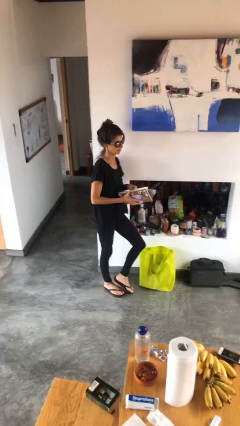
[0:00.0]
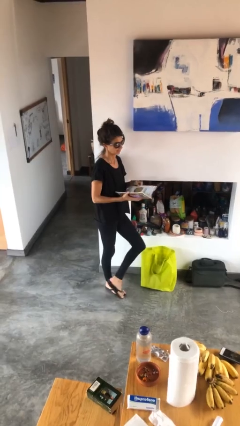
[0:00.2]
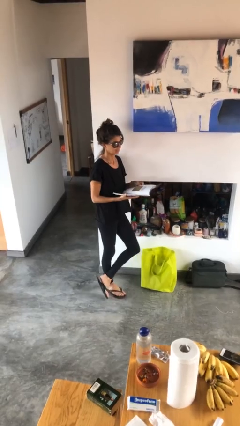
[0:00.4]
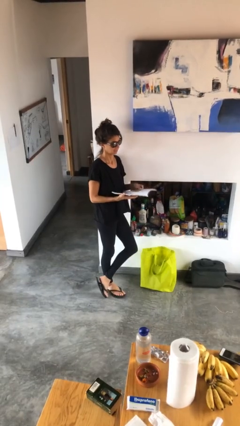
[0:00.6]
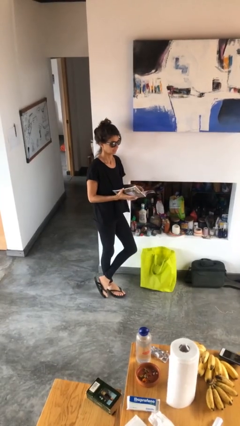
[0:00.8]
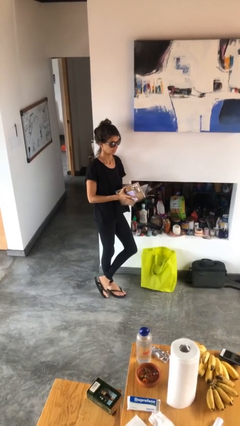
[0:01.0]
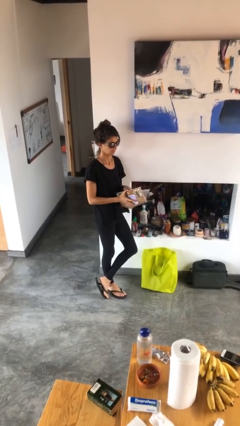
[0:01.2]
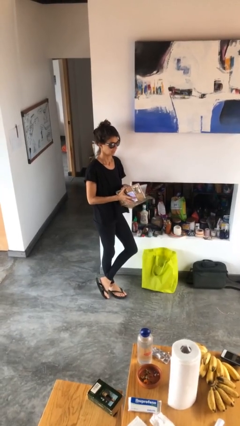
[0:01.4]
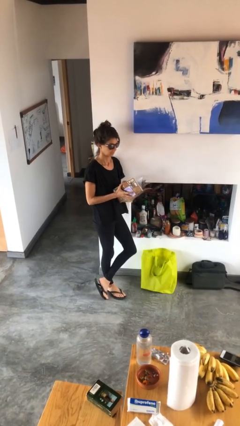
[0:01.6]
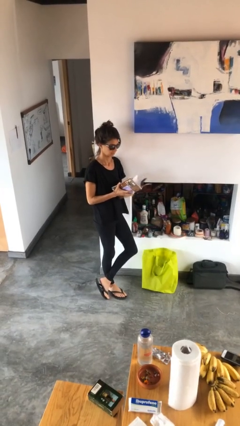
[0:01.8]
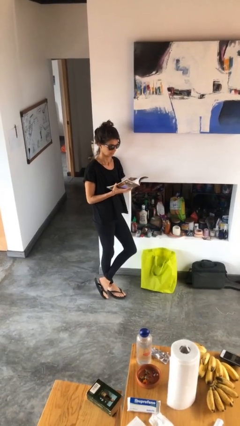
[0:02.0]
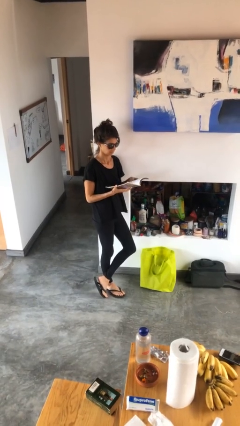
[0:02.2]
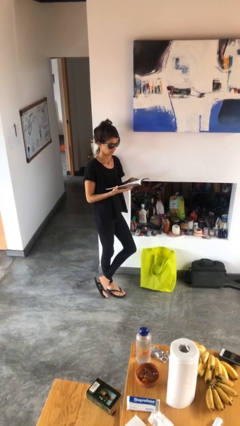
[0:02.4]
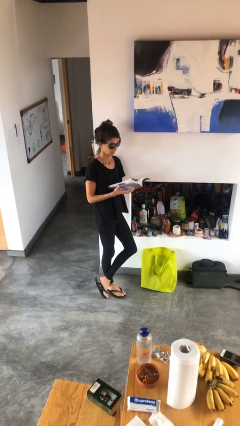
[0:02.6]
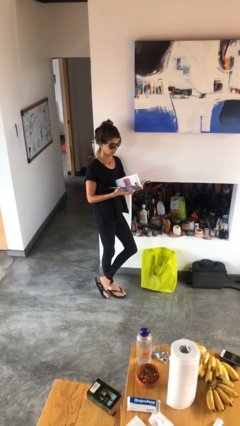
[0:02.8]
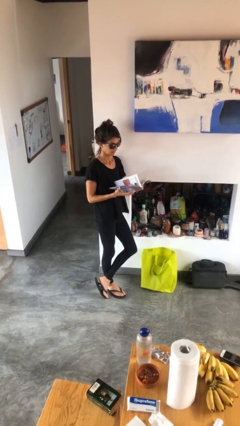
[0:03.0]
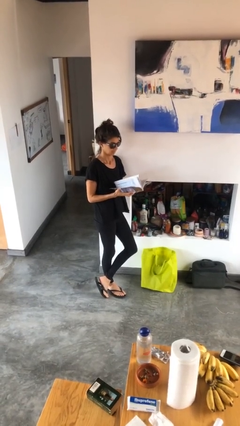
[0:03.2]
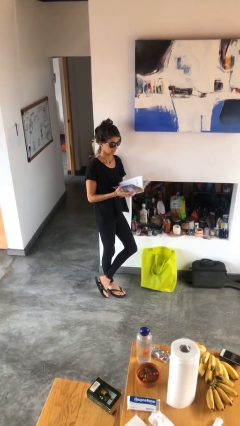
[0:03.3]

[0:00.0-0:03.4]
person reads magazine

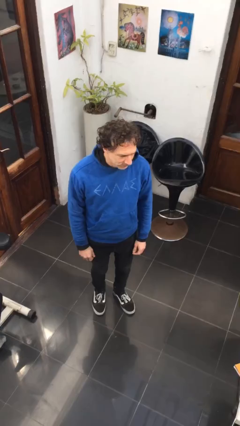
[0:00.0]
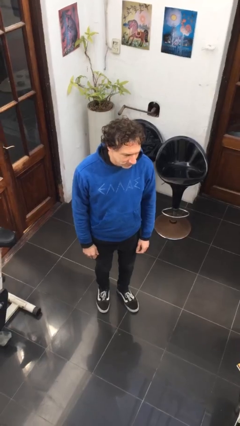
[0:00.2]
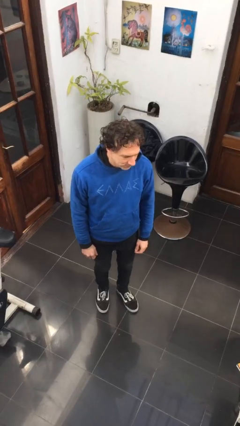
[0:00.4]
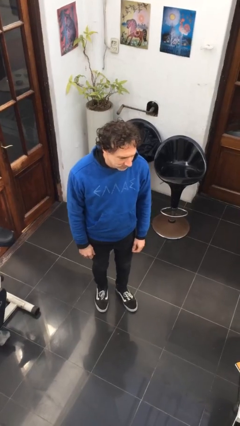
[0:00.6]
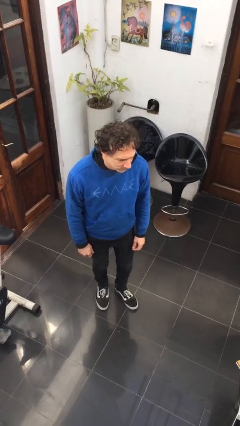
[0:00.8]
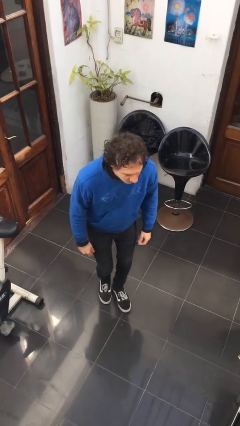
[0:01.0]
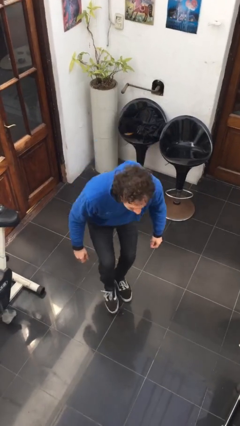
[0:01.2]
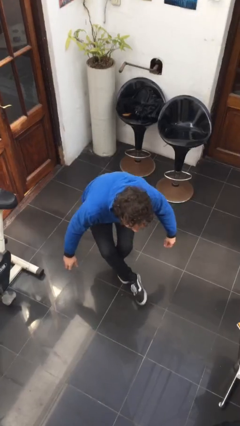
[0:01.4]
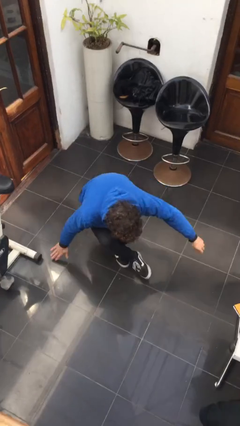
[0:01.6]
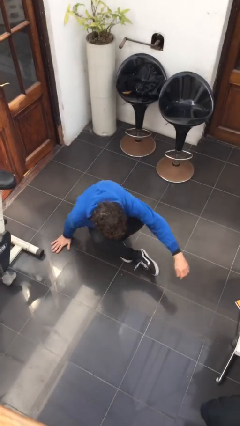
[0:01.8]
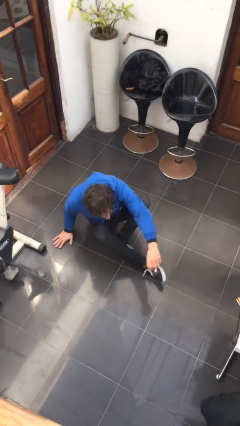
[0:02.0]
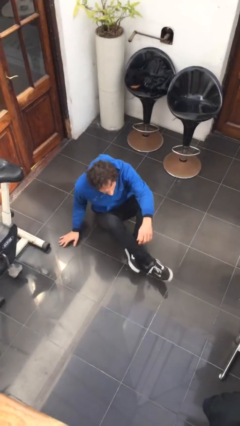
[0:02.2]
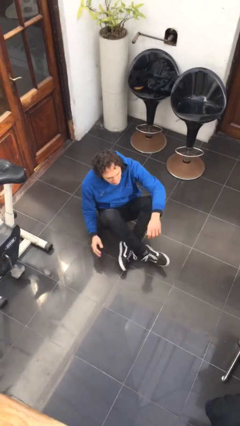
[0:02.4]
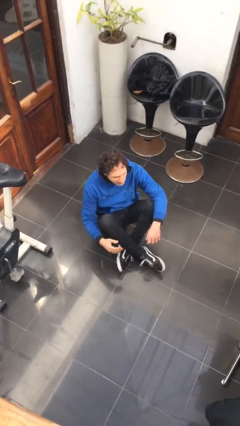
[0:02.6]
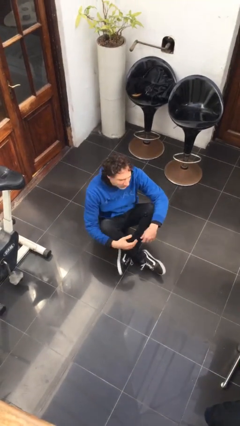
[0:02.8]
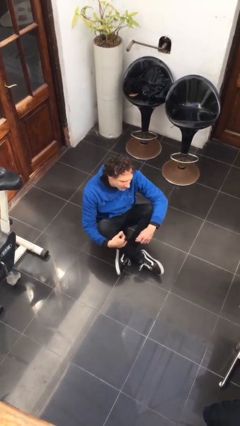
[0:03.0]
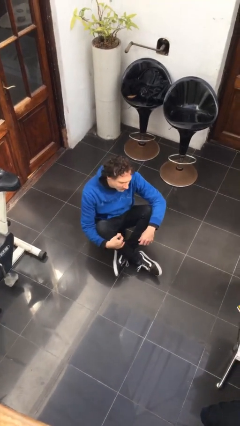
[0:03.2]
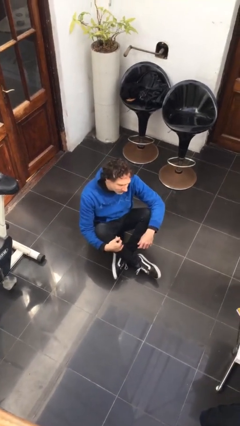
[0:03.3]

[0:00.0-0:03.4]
person sits crisscross

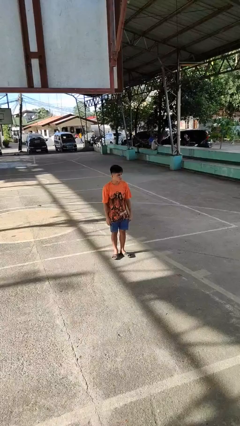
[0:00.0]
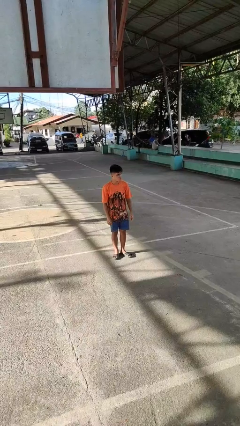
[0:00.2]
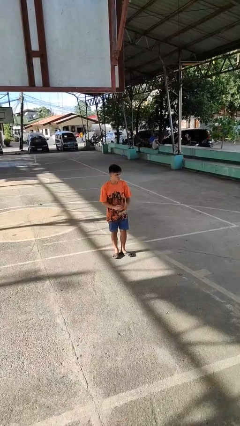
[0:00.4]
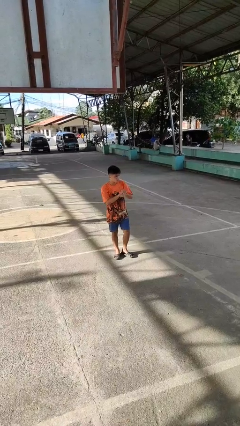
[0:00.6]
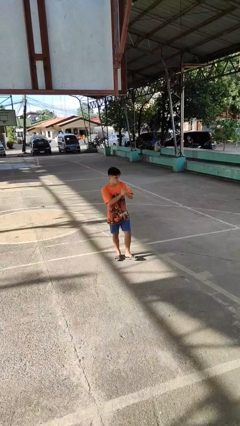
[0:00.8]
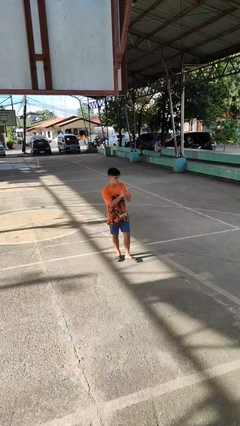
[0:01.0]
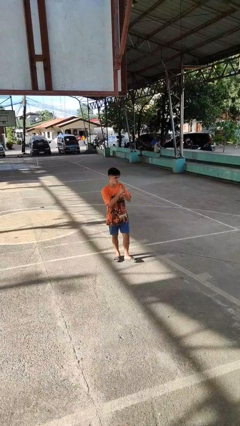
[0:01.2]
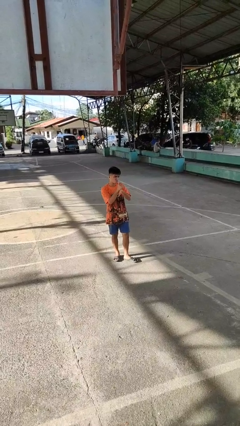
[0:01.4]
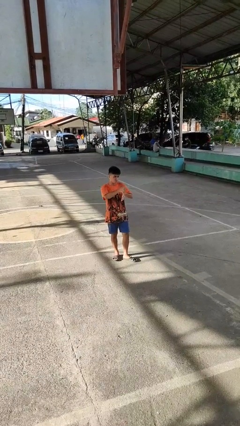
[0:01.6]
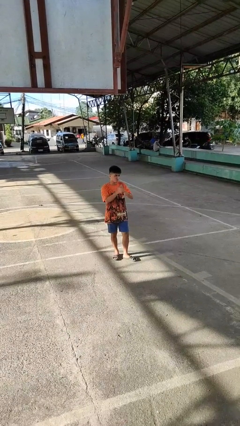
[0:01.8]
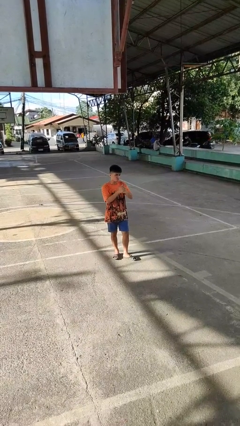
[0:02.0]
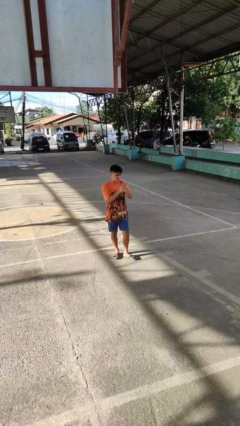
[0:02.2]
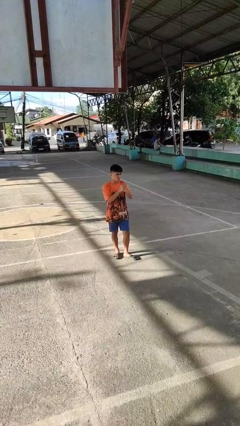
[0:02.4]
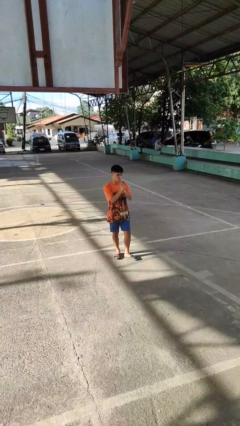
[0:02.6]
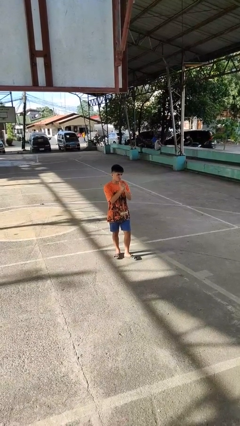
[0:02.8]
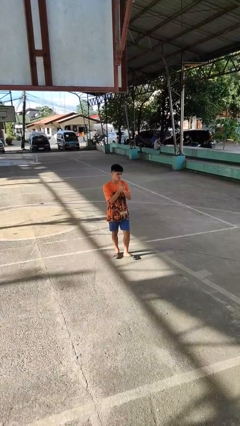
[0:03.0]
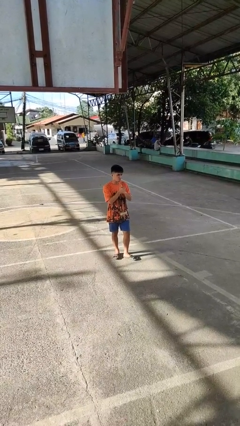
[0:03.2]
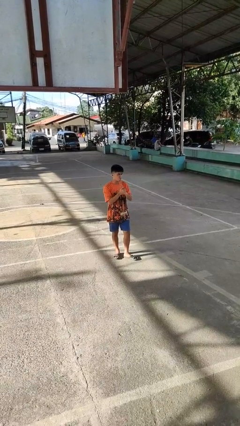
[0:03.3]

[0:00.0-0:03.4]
person cracks knuckles

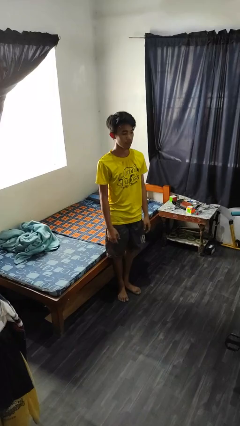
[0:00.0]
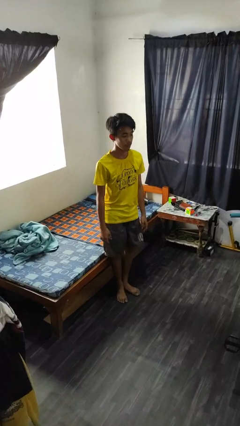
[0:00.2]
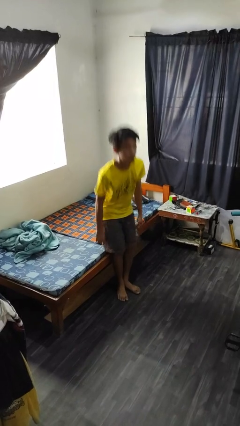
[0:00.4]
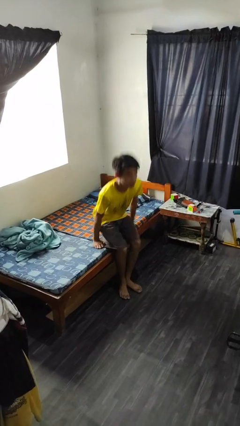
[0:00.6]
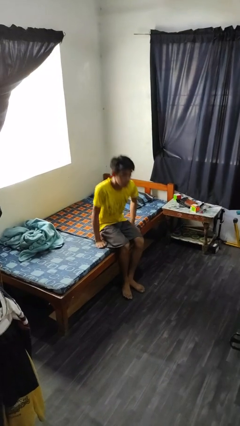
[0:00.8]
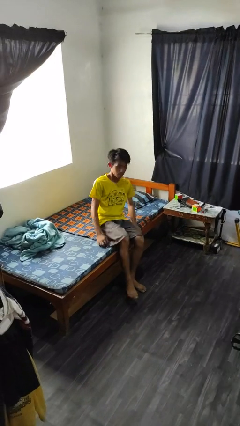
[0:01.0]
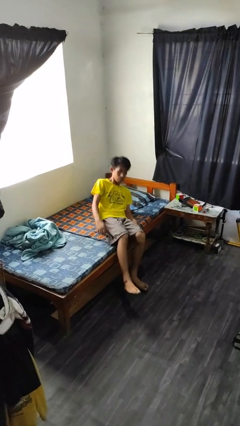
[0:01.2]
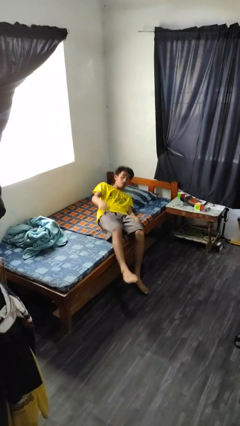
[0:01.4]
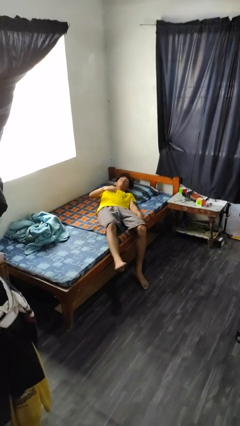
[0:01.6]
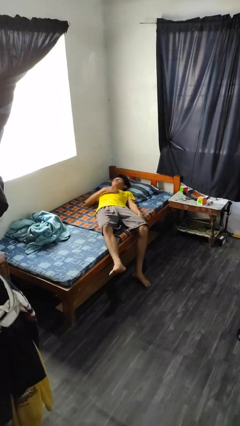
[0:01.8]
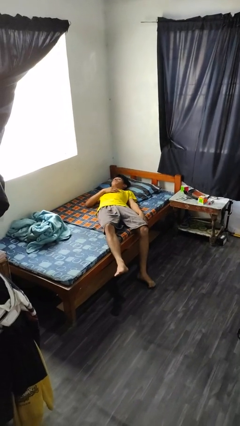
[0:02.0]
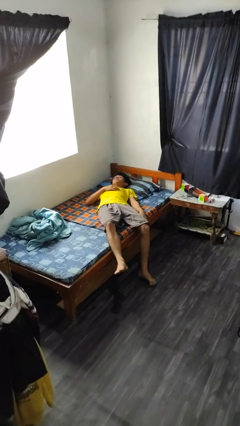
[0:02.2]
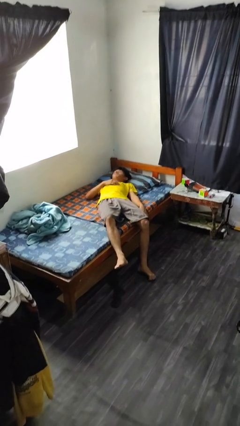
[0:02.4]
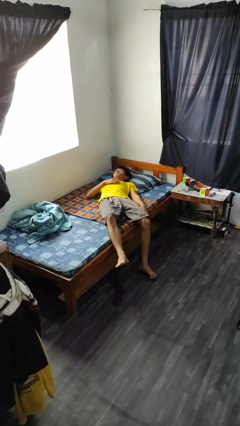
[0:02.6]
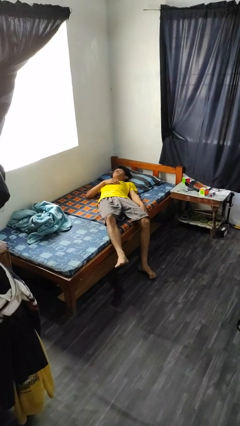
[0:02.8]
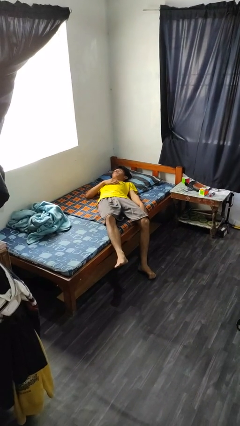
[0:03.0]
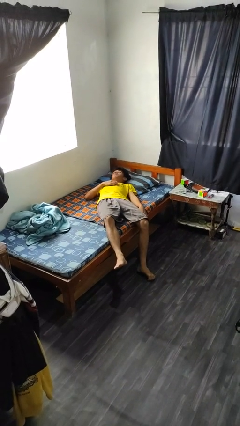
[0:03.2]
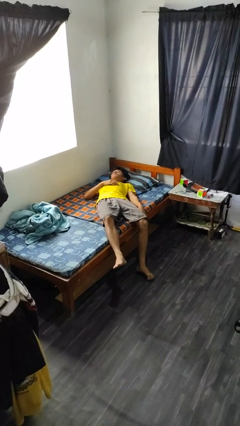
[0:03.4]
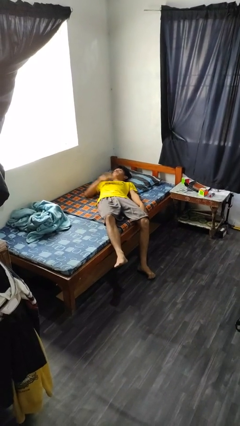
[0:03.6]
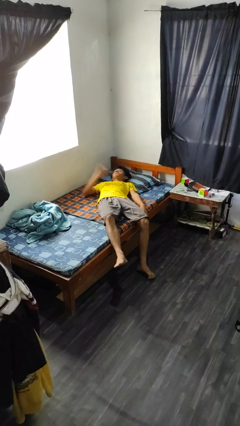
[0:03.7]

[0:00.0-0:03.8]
person lies down on bed

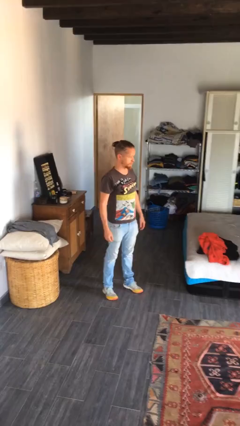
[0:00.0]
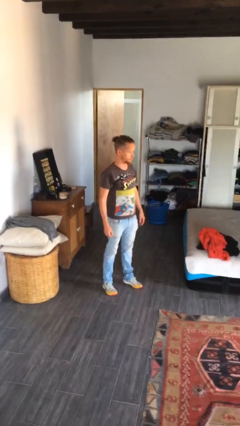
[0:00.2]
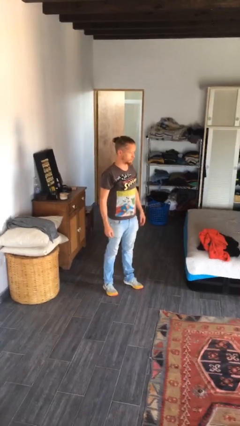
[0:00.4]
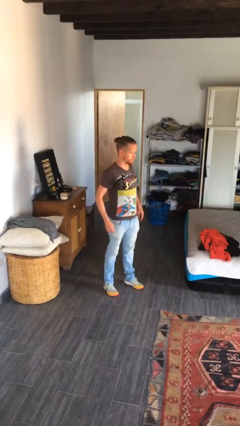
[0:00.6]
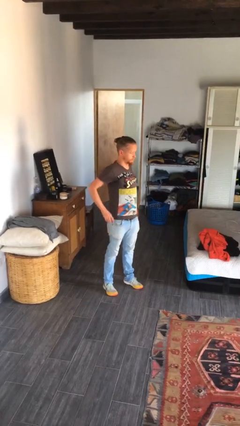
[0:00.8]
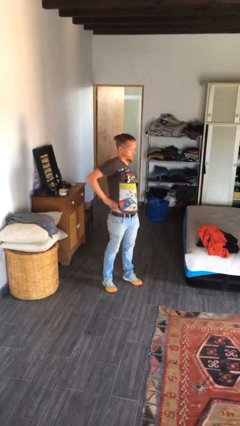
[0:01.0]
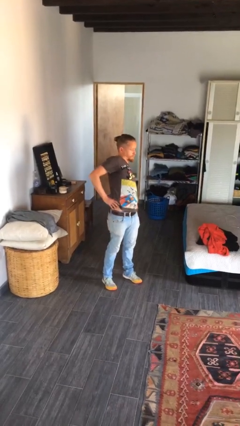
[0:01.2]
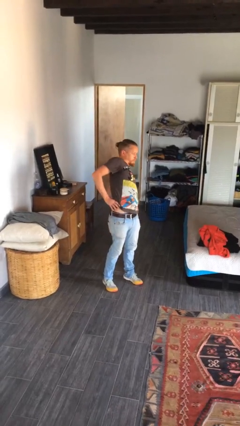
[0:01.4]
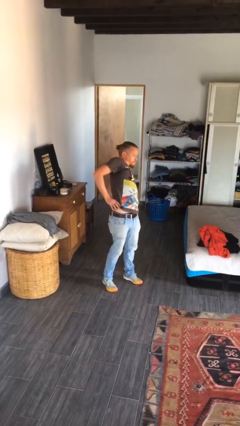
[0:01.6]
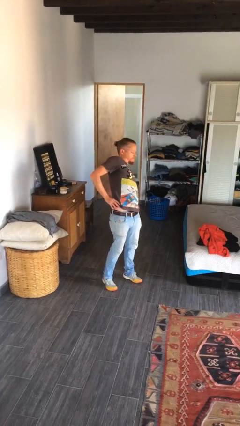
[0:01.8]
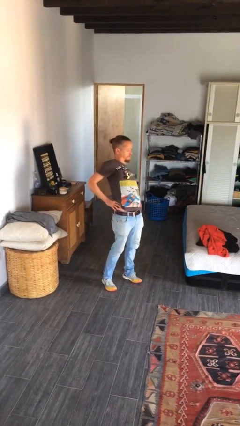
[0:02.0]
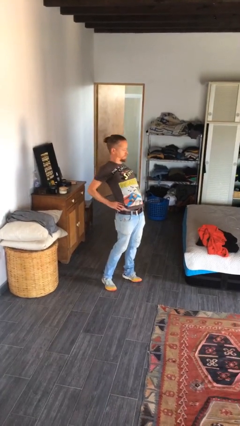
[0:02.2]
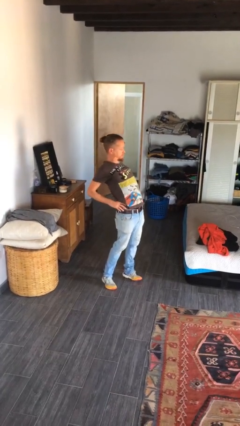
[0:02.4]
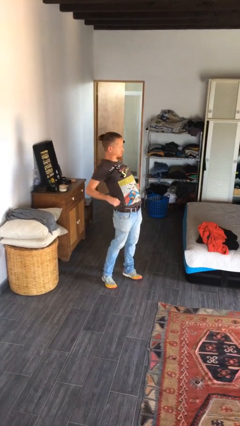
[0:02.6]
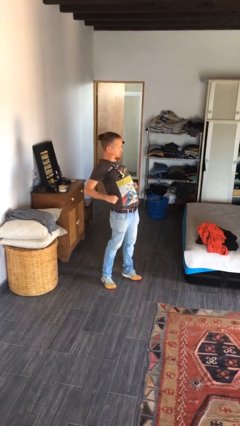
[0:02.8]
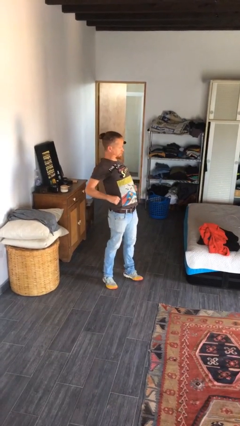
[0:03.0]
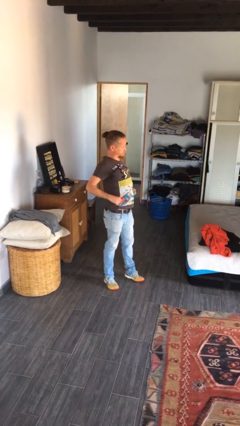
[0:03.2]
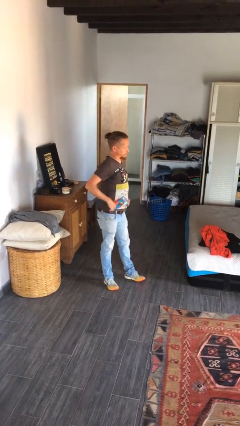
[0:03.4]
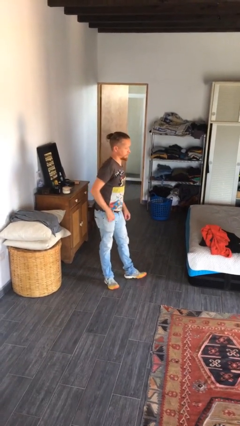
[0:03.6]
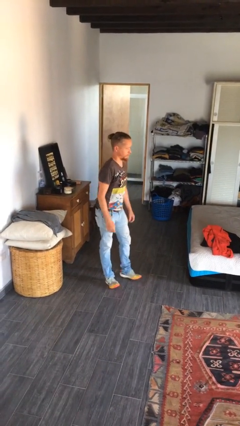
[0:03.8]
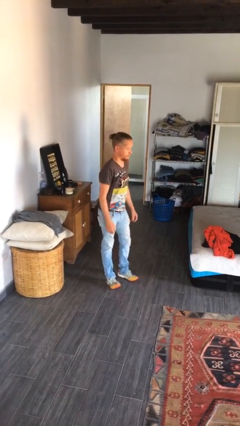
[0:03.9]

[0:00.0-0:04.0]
person stretches back
